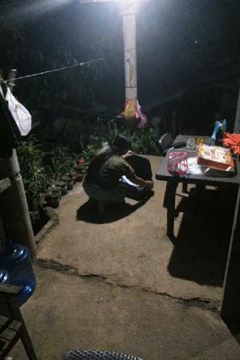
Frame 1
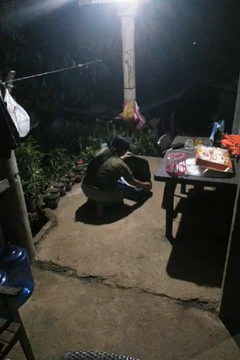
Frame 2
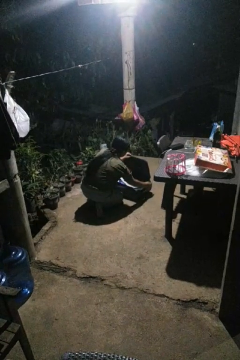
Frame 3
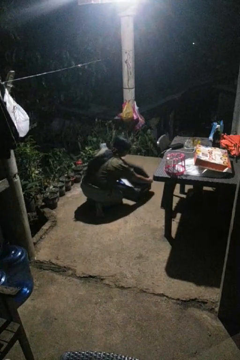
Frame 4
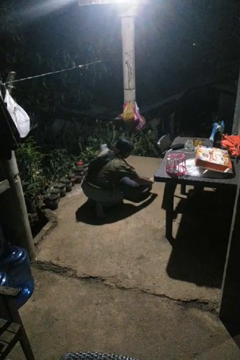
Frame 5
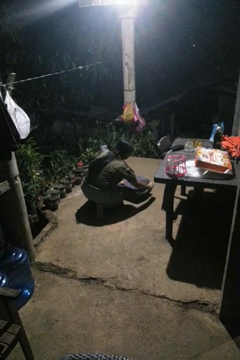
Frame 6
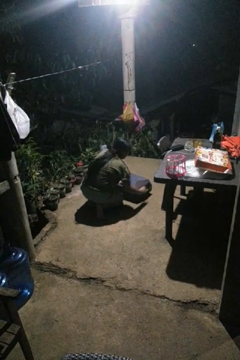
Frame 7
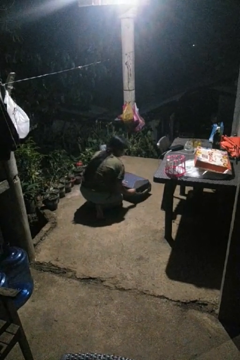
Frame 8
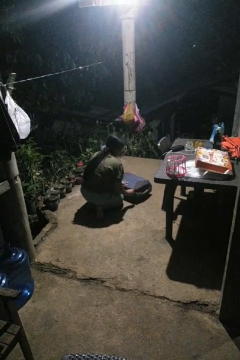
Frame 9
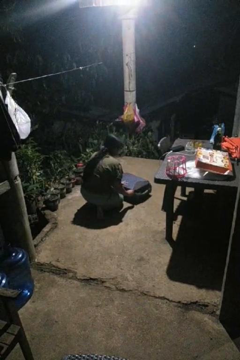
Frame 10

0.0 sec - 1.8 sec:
person closes suitcase

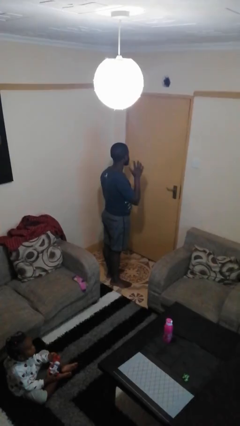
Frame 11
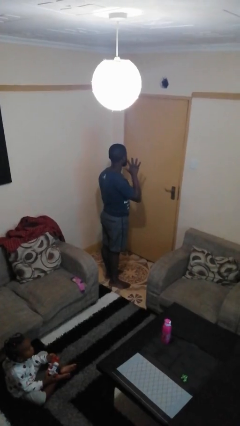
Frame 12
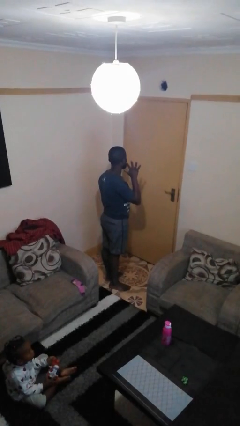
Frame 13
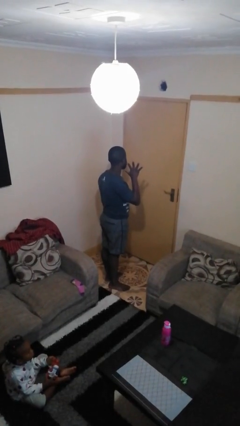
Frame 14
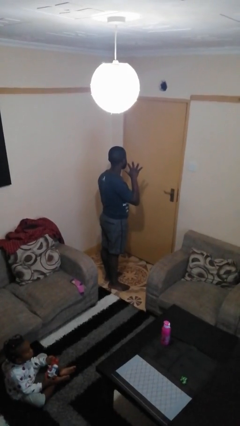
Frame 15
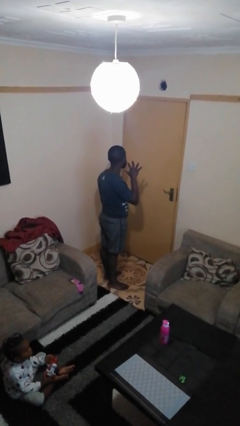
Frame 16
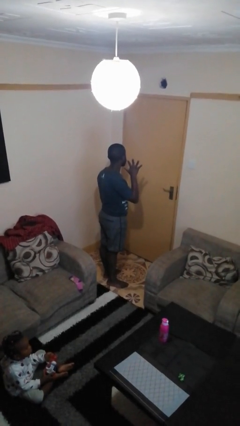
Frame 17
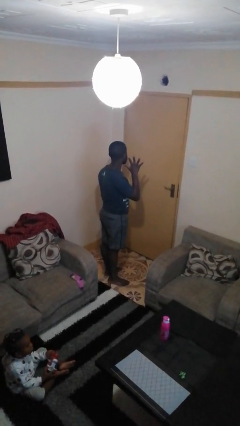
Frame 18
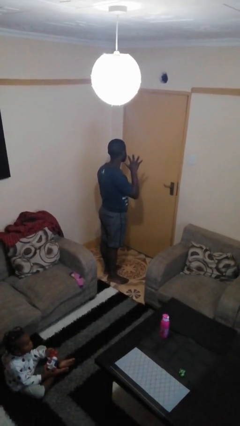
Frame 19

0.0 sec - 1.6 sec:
person gestures number five

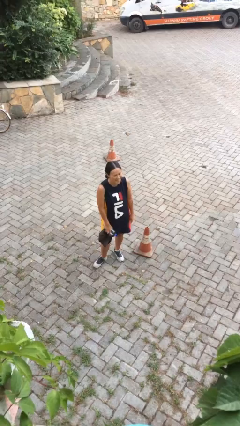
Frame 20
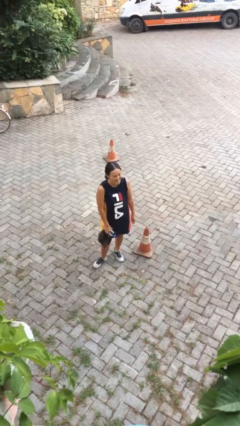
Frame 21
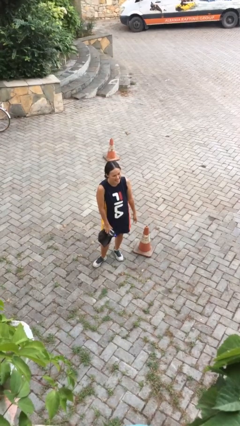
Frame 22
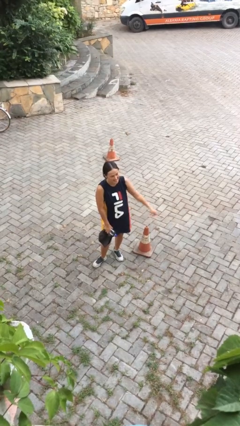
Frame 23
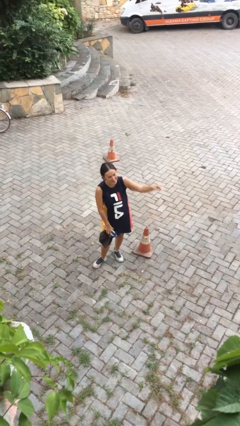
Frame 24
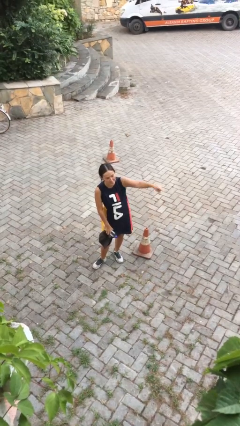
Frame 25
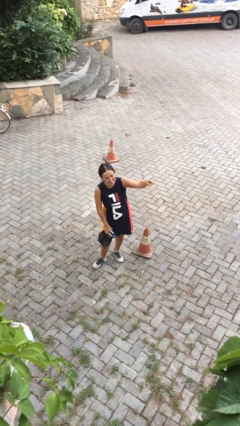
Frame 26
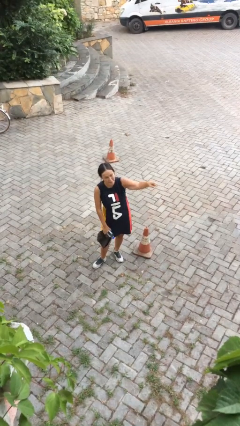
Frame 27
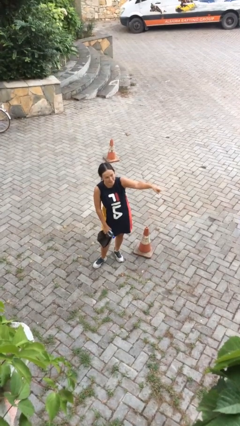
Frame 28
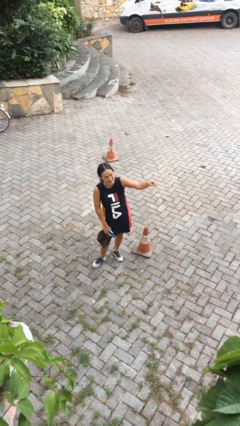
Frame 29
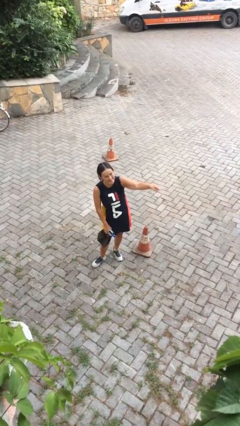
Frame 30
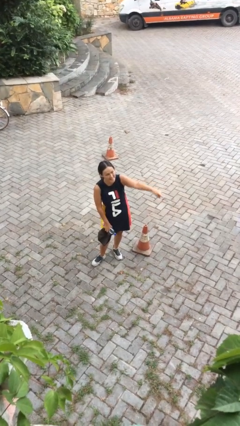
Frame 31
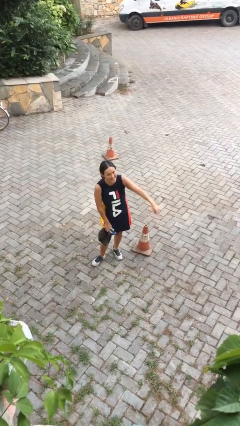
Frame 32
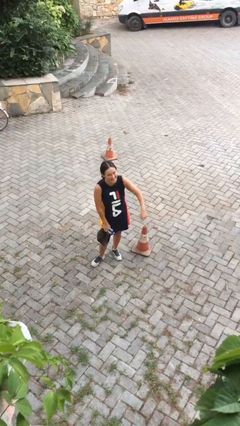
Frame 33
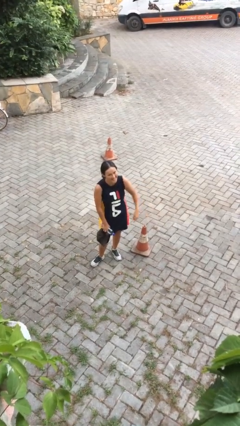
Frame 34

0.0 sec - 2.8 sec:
person points at person

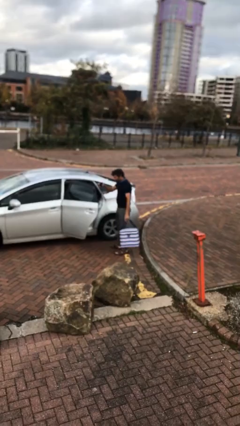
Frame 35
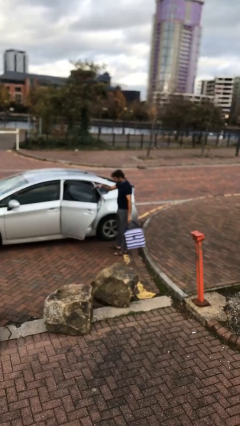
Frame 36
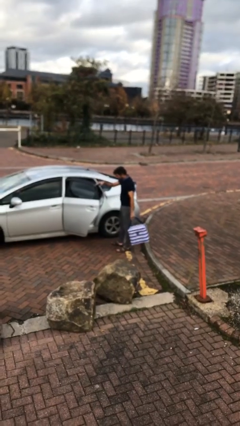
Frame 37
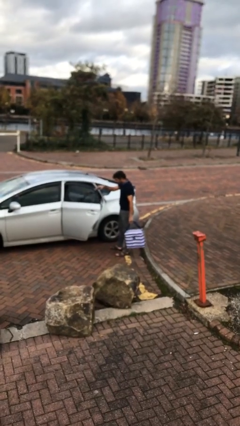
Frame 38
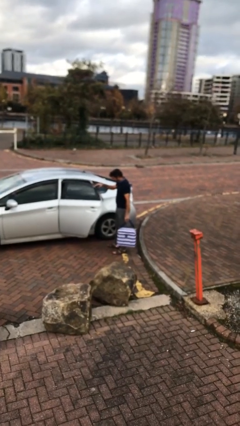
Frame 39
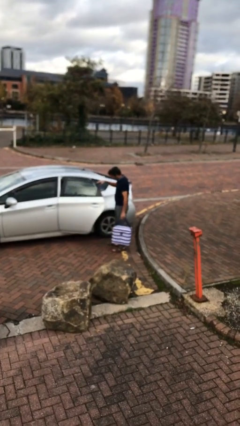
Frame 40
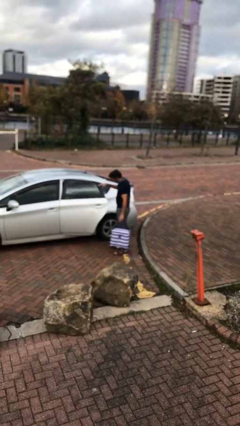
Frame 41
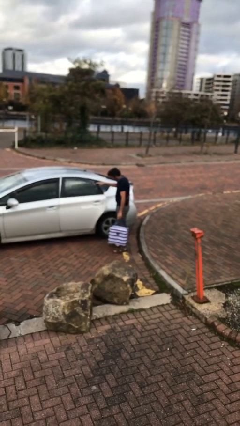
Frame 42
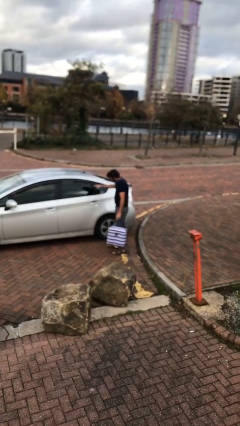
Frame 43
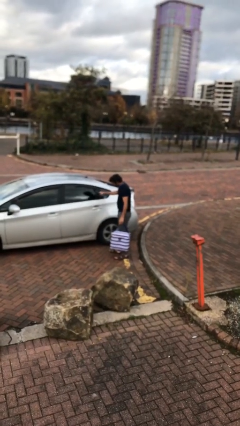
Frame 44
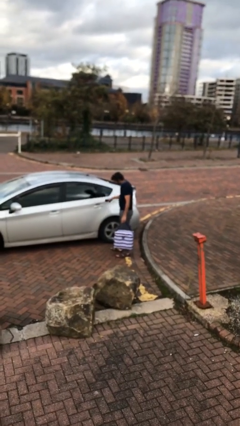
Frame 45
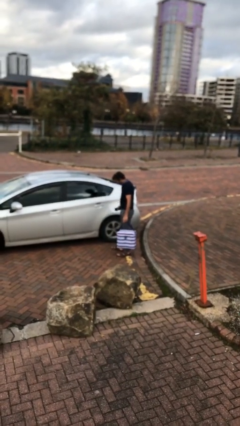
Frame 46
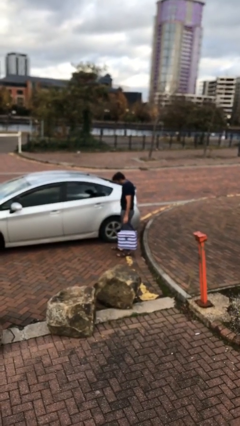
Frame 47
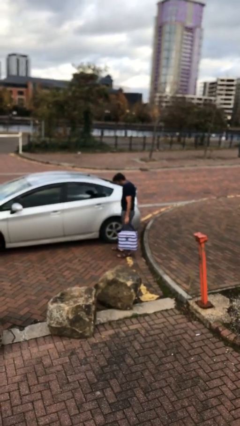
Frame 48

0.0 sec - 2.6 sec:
person closes car door

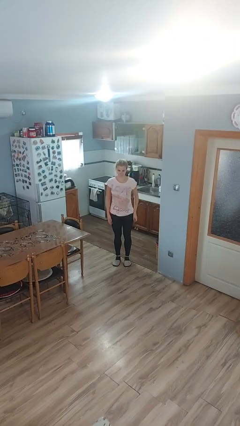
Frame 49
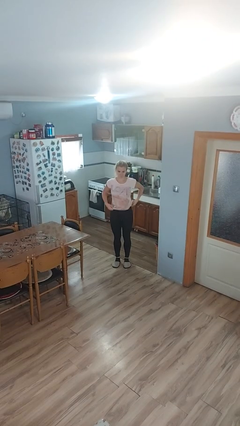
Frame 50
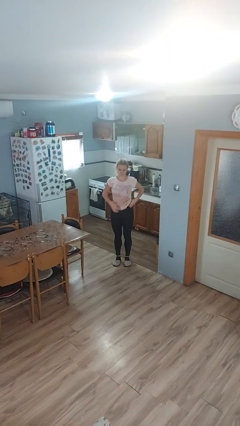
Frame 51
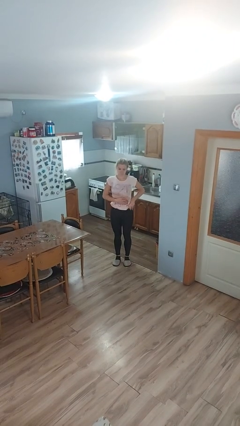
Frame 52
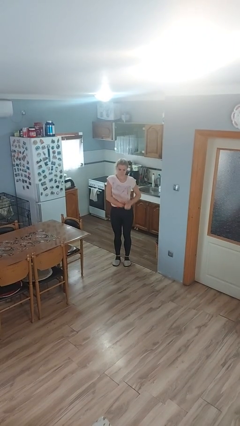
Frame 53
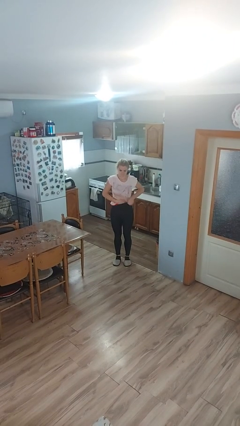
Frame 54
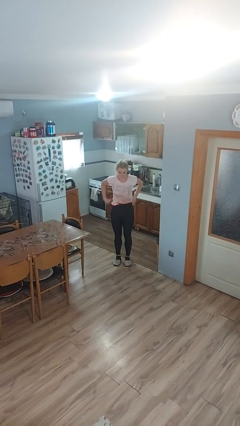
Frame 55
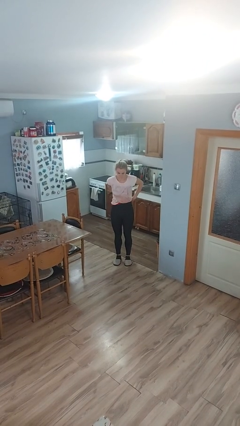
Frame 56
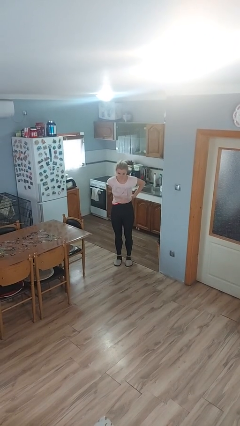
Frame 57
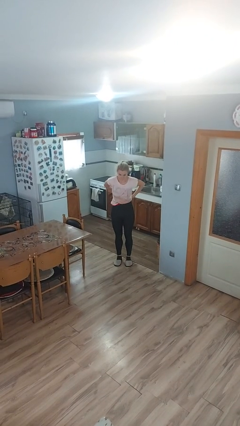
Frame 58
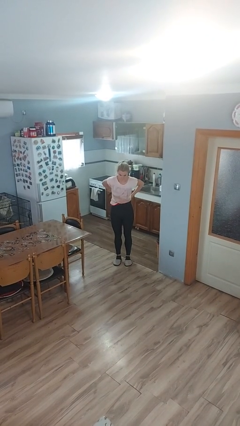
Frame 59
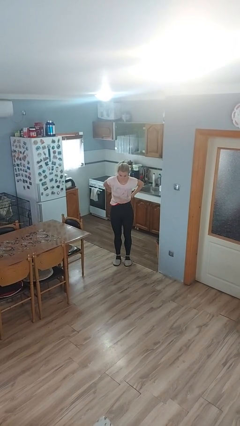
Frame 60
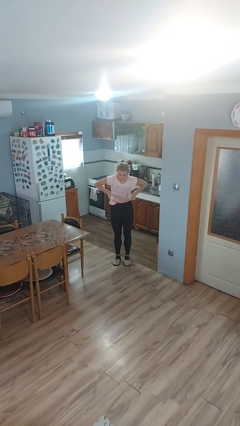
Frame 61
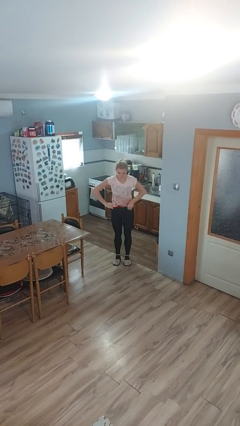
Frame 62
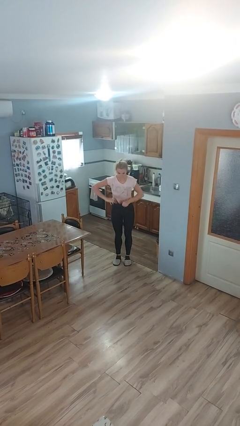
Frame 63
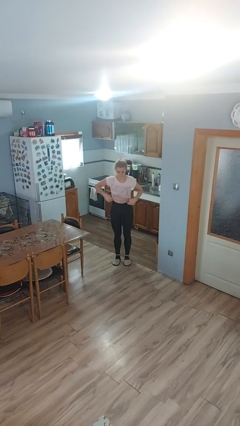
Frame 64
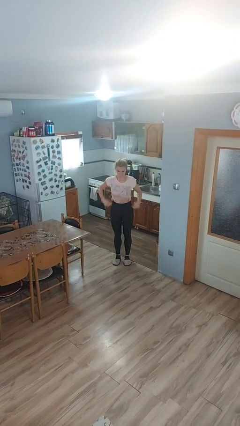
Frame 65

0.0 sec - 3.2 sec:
person tucks in shirt

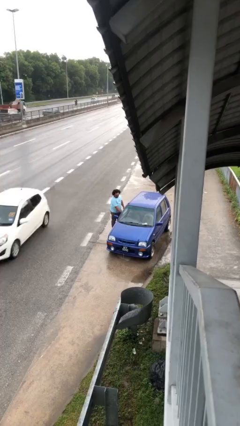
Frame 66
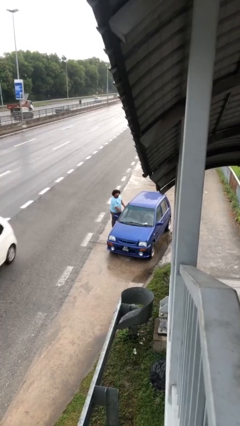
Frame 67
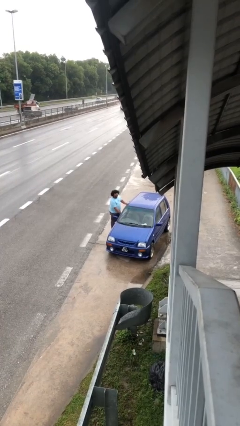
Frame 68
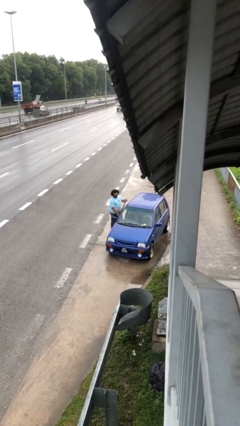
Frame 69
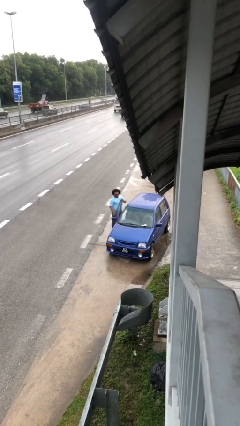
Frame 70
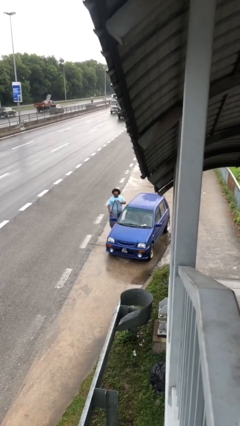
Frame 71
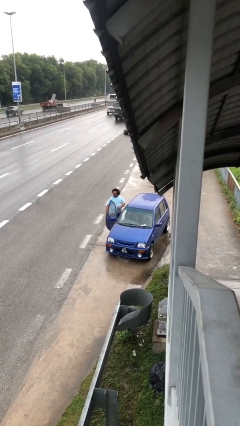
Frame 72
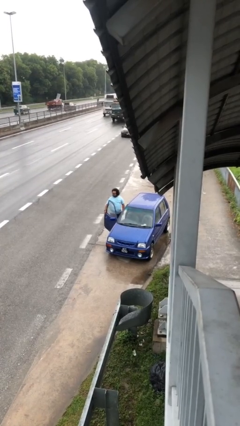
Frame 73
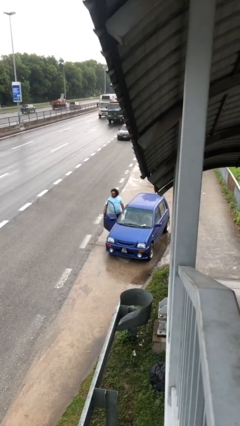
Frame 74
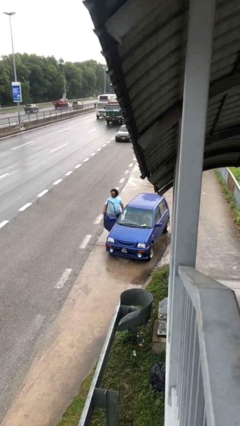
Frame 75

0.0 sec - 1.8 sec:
person opens car door

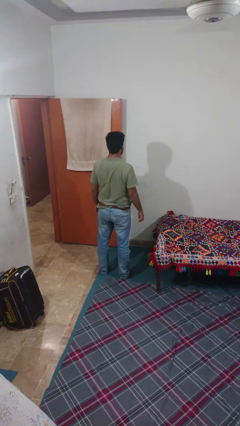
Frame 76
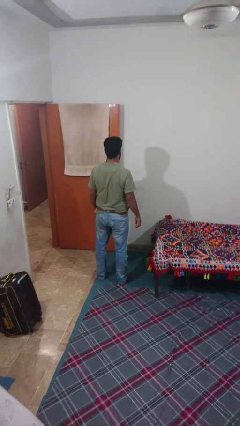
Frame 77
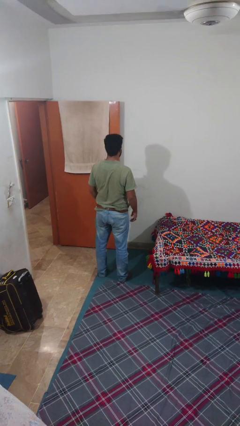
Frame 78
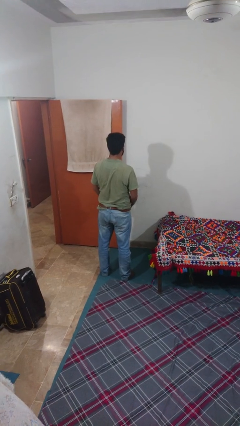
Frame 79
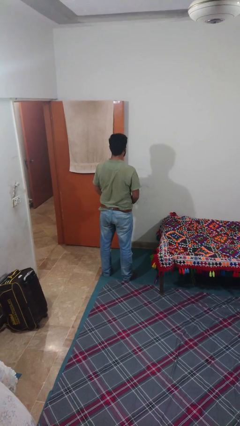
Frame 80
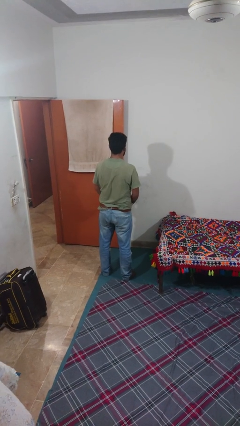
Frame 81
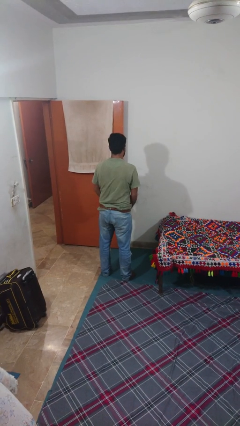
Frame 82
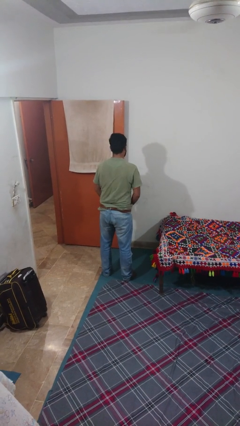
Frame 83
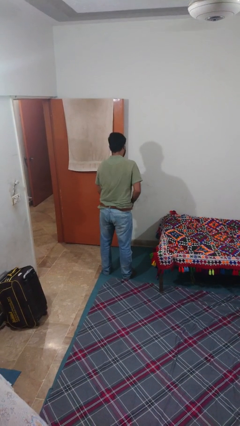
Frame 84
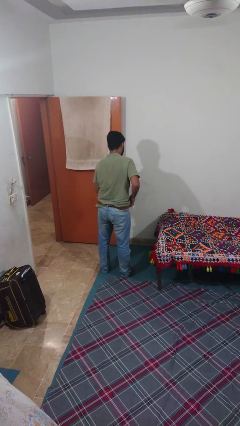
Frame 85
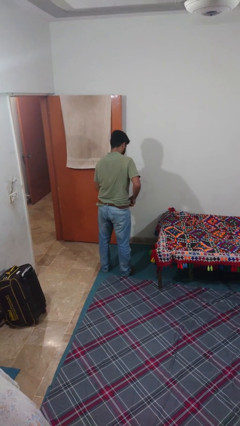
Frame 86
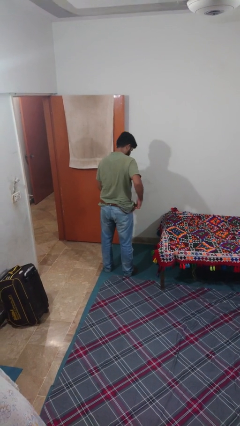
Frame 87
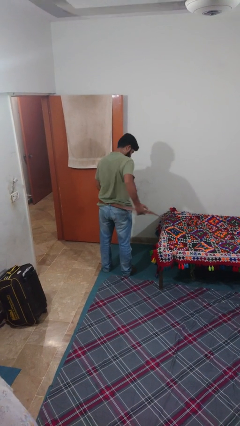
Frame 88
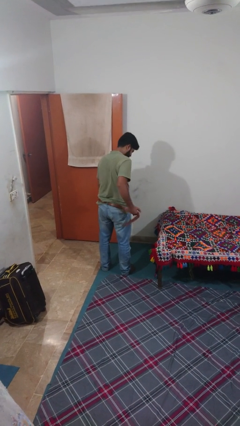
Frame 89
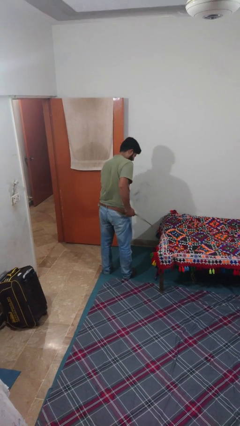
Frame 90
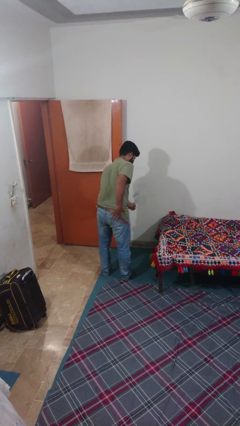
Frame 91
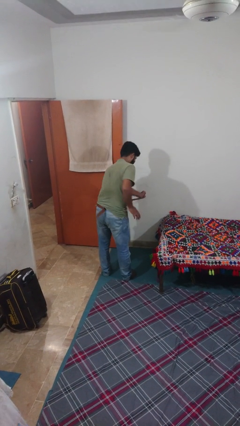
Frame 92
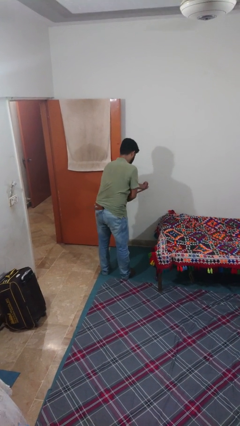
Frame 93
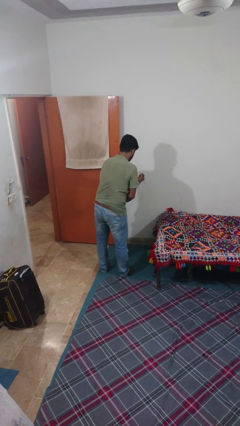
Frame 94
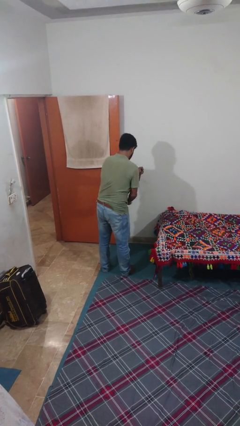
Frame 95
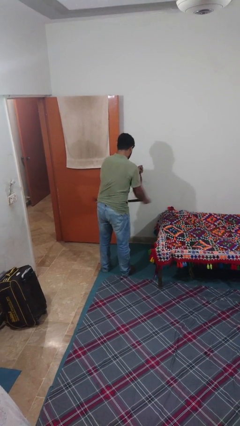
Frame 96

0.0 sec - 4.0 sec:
person takes off belt
